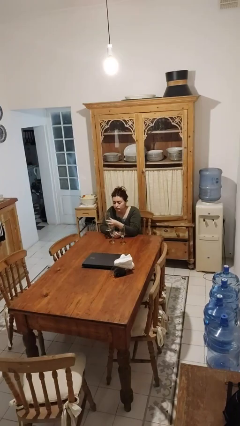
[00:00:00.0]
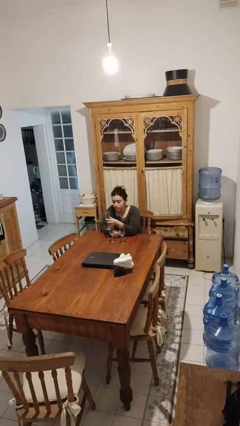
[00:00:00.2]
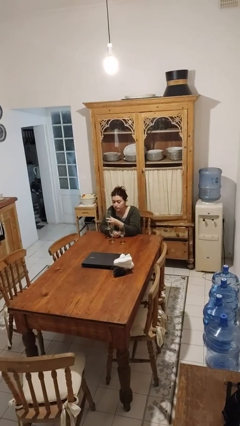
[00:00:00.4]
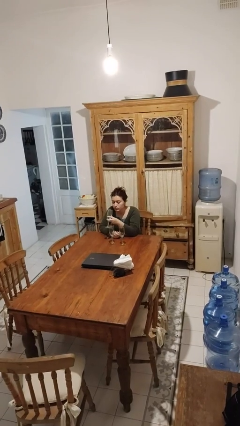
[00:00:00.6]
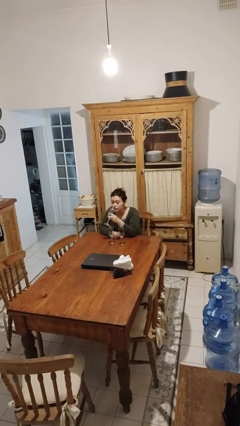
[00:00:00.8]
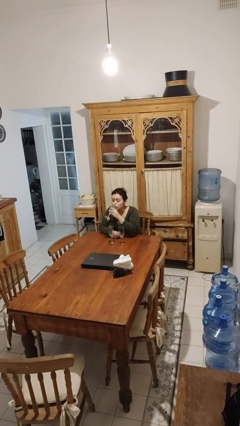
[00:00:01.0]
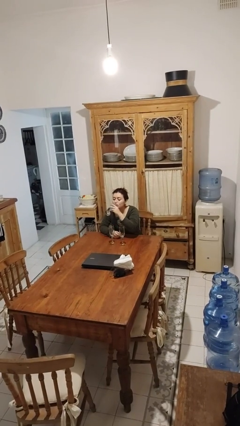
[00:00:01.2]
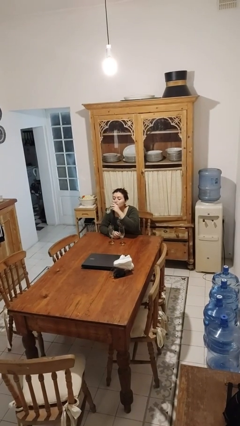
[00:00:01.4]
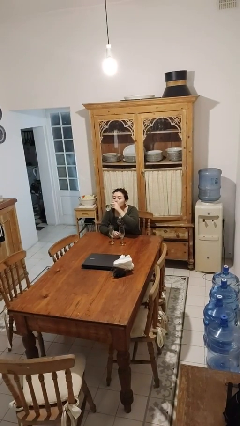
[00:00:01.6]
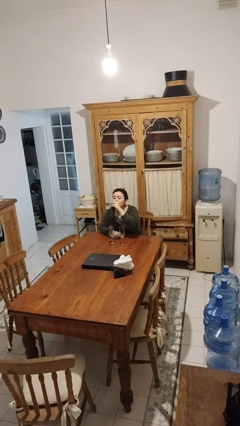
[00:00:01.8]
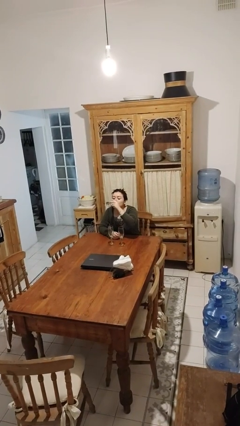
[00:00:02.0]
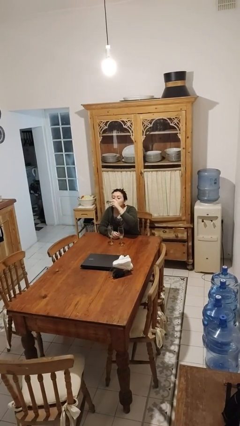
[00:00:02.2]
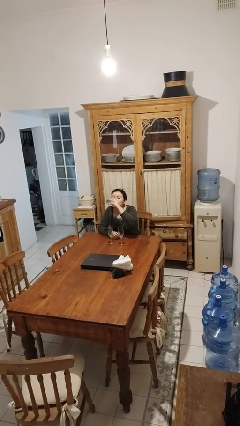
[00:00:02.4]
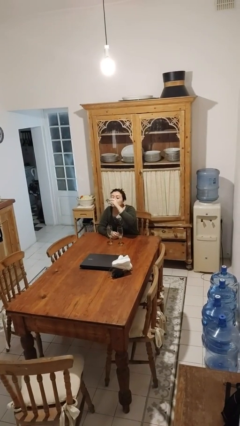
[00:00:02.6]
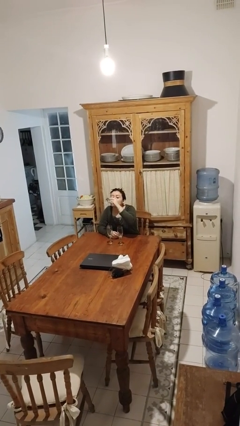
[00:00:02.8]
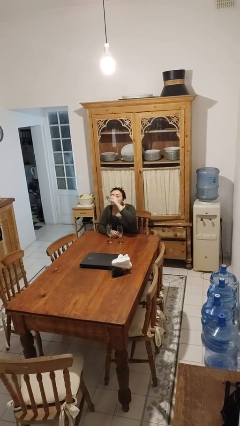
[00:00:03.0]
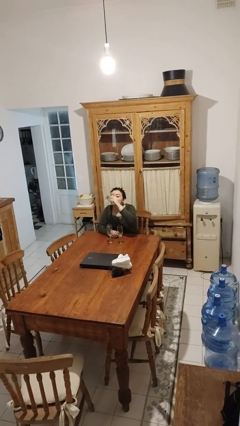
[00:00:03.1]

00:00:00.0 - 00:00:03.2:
person drinks from shotglass

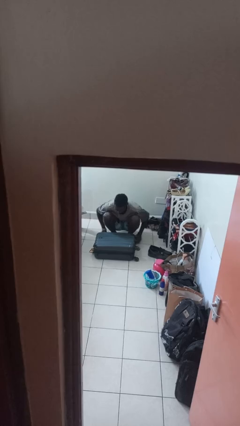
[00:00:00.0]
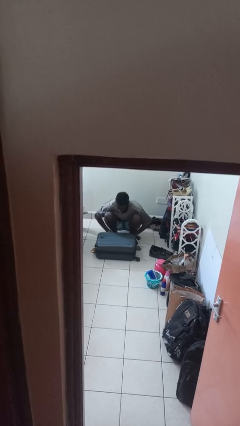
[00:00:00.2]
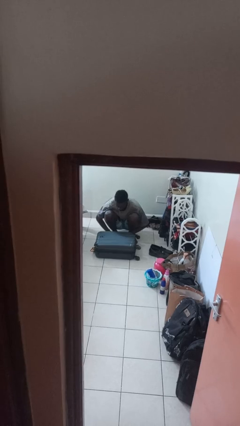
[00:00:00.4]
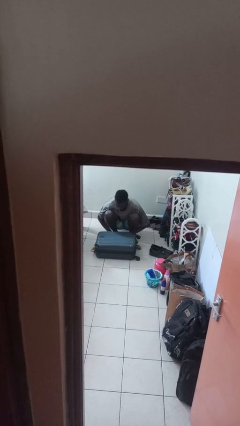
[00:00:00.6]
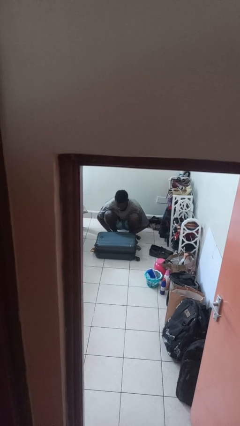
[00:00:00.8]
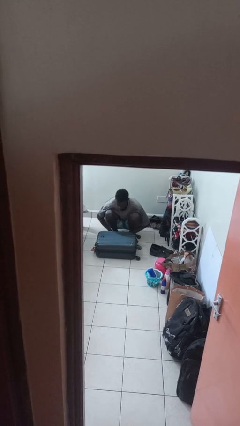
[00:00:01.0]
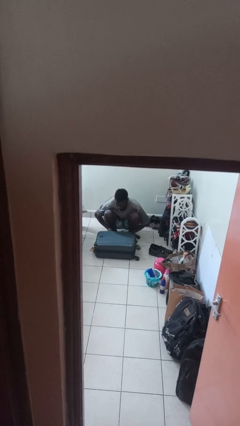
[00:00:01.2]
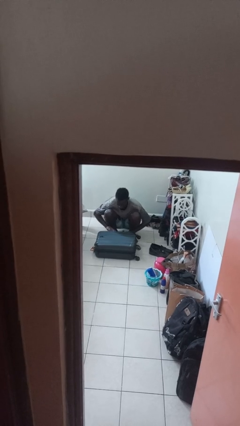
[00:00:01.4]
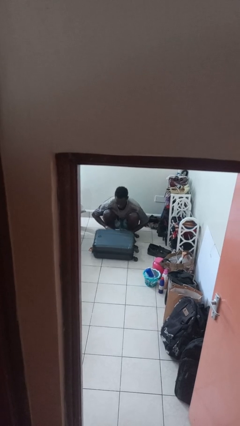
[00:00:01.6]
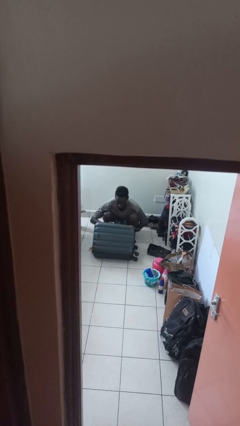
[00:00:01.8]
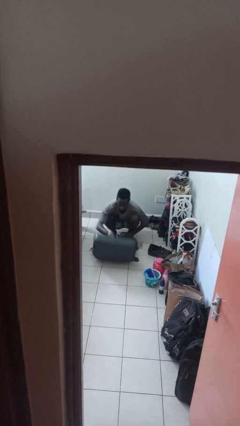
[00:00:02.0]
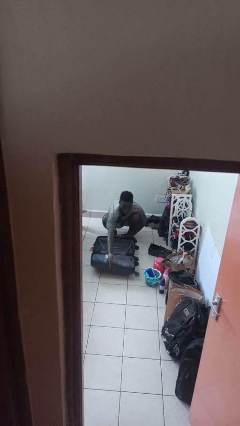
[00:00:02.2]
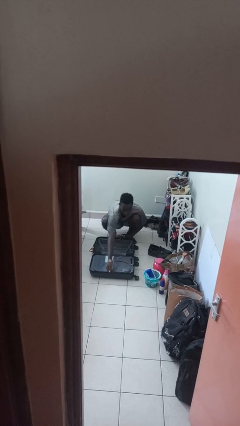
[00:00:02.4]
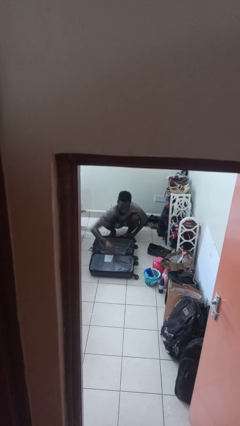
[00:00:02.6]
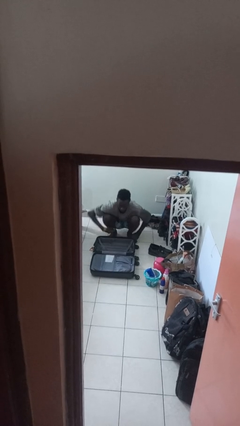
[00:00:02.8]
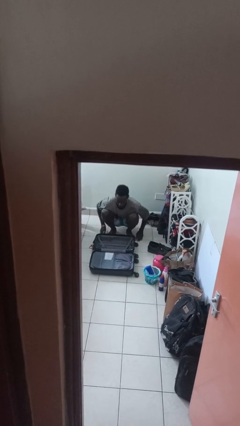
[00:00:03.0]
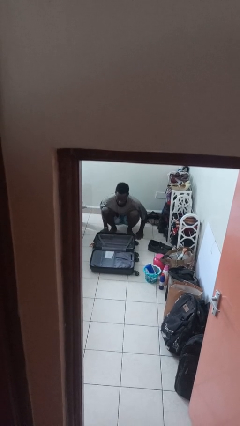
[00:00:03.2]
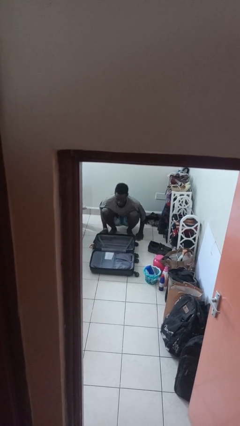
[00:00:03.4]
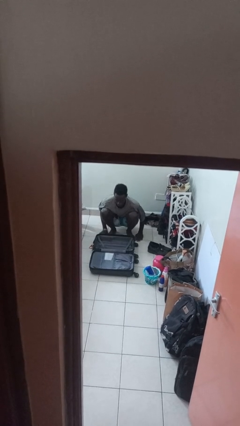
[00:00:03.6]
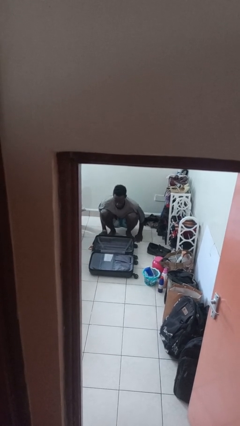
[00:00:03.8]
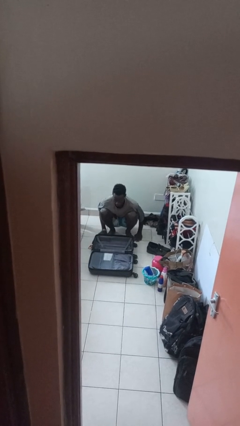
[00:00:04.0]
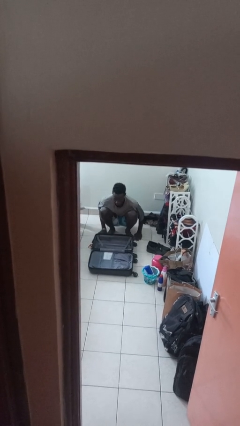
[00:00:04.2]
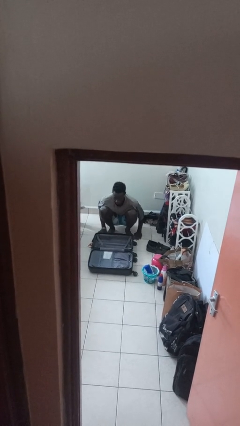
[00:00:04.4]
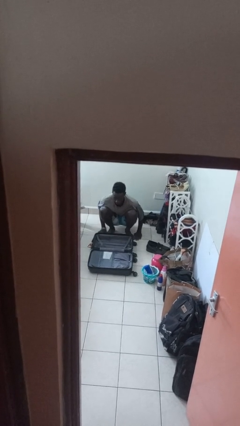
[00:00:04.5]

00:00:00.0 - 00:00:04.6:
person opens suitcase

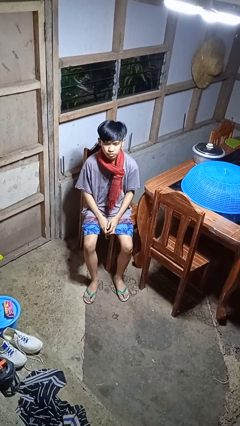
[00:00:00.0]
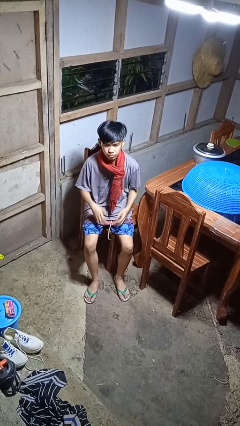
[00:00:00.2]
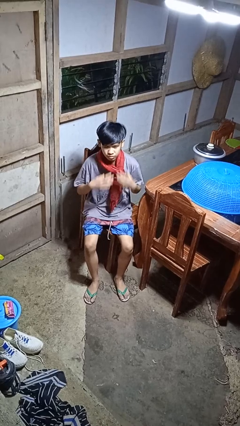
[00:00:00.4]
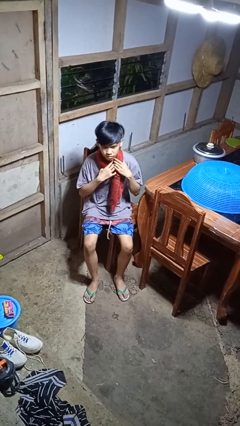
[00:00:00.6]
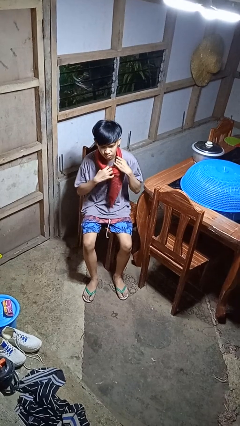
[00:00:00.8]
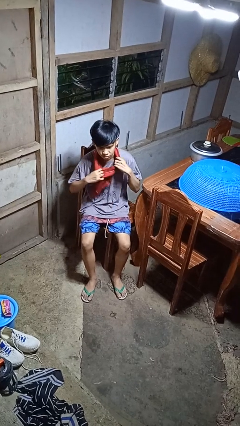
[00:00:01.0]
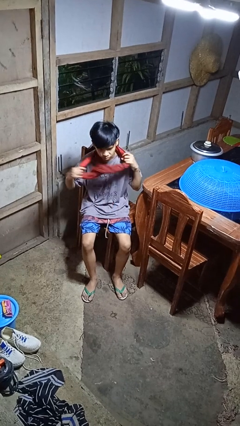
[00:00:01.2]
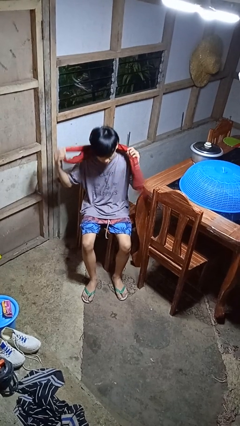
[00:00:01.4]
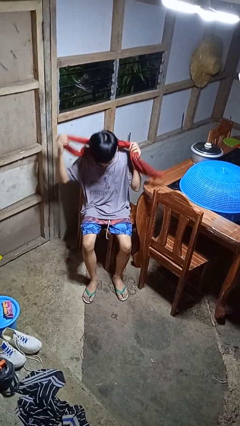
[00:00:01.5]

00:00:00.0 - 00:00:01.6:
person takes off scarf

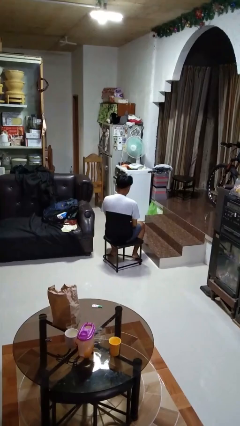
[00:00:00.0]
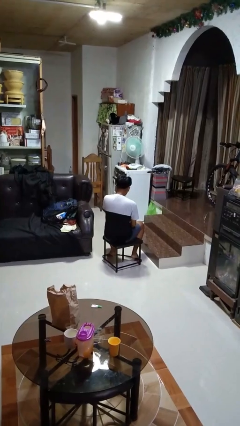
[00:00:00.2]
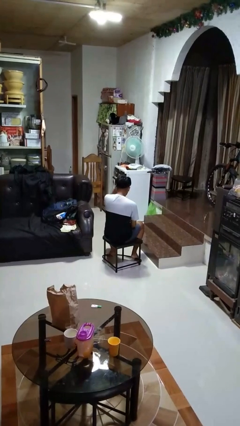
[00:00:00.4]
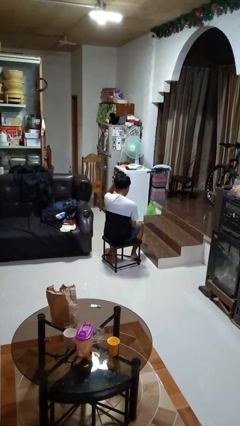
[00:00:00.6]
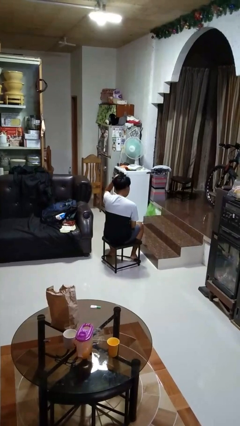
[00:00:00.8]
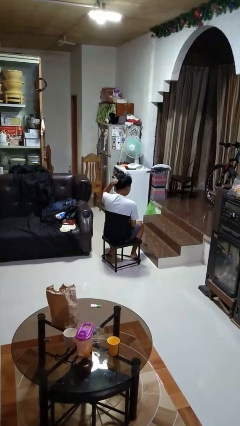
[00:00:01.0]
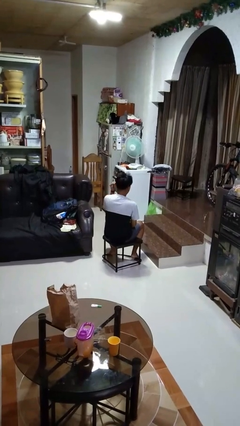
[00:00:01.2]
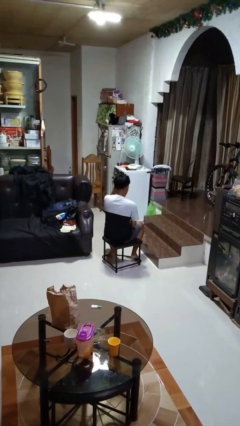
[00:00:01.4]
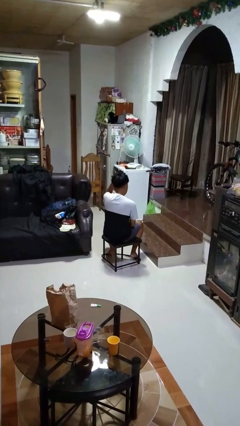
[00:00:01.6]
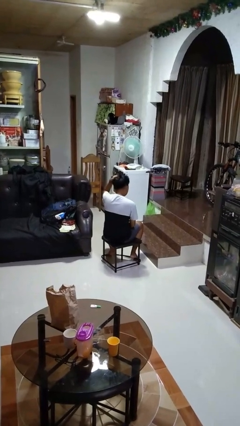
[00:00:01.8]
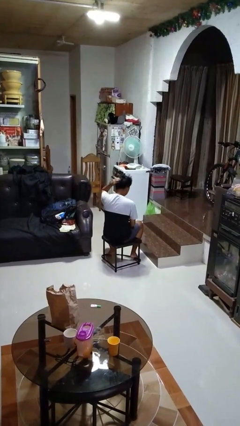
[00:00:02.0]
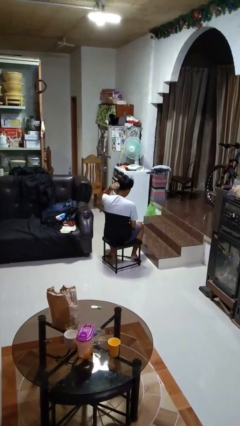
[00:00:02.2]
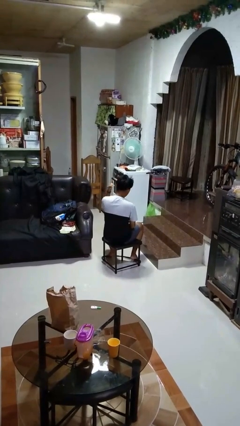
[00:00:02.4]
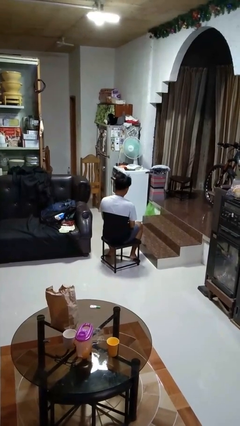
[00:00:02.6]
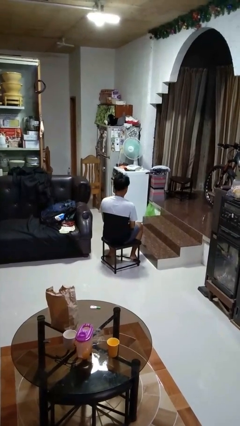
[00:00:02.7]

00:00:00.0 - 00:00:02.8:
person strokes hair

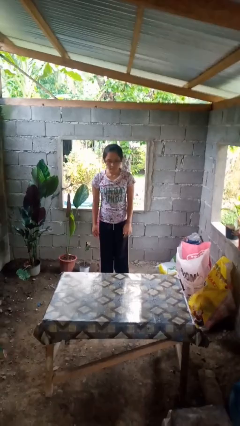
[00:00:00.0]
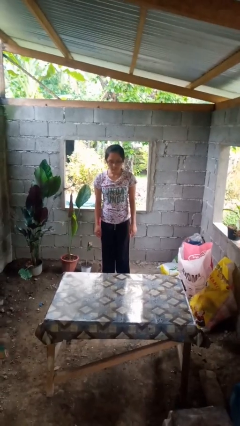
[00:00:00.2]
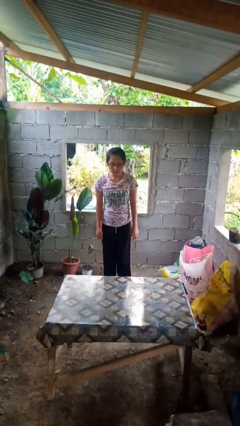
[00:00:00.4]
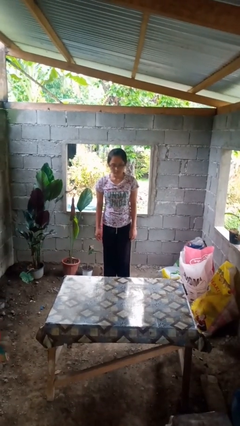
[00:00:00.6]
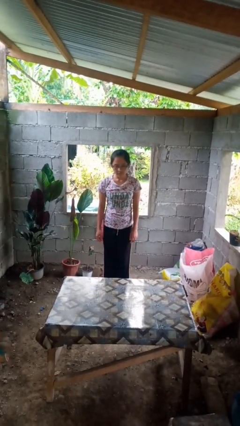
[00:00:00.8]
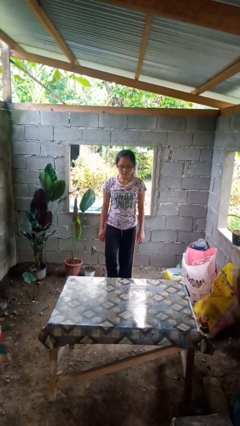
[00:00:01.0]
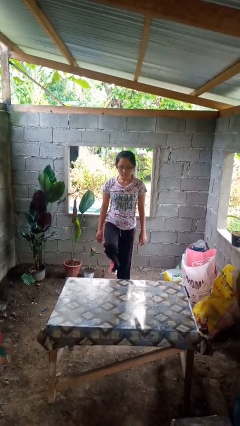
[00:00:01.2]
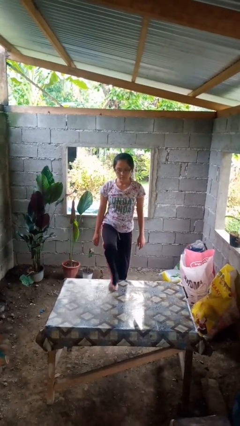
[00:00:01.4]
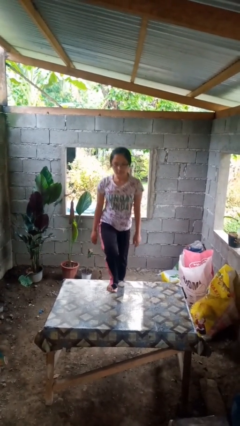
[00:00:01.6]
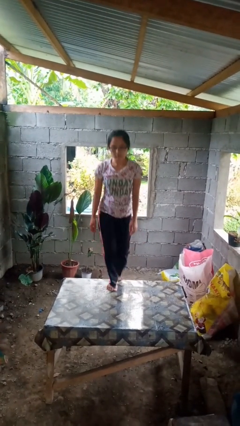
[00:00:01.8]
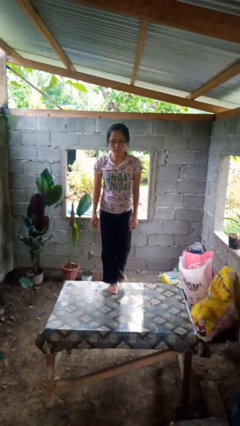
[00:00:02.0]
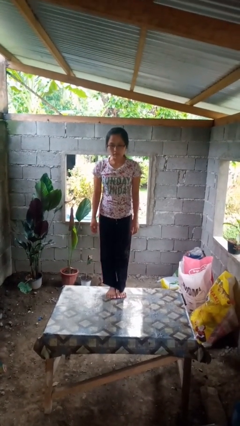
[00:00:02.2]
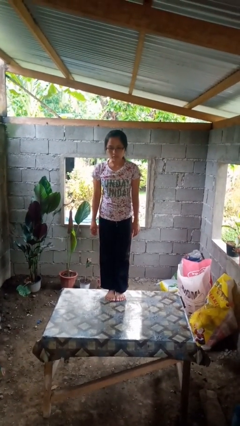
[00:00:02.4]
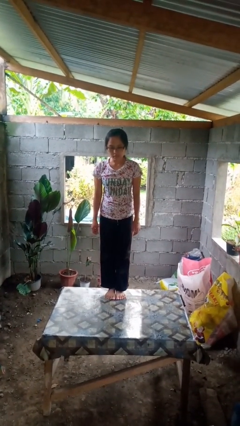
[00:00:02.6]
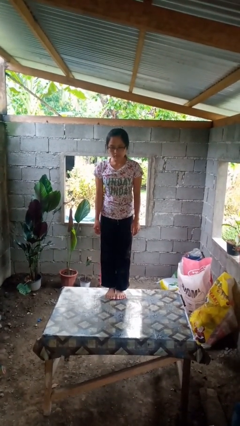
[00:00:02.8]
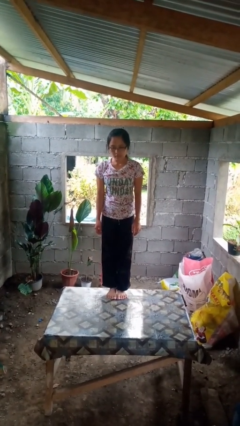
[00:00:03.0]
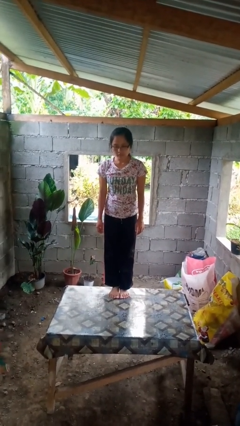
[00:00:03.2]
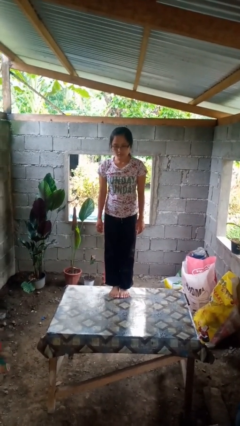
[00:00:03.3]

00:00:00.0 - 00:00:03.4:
person climbs on table

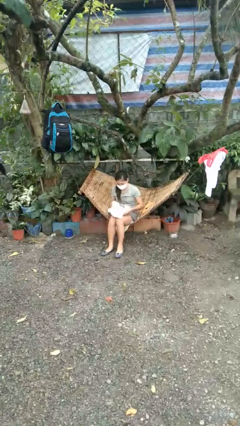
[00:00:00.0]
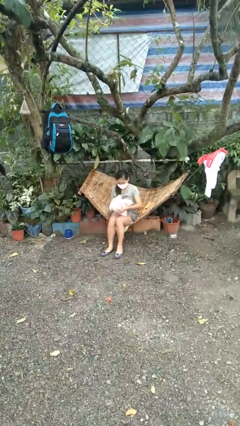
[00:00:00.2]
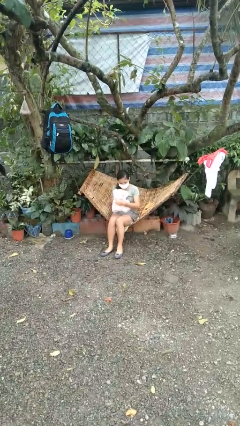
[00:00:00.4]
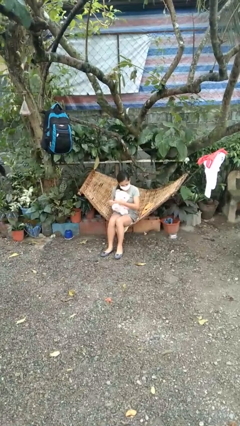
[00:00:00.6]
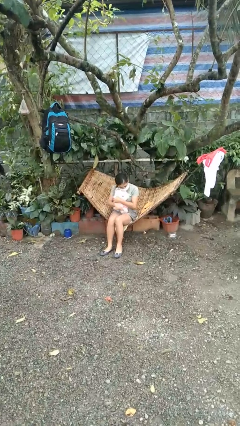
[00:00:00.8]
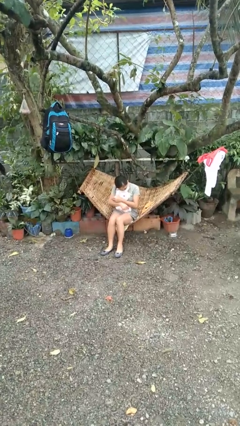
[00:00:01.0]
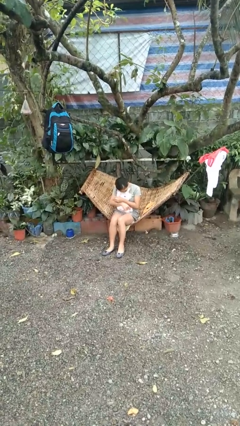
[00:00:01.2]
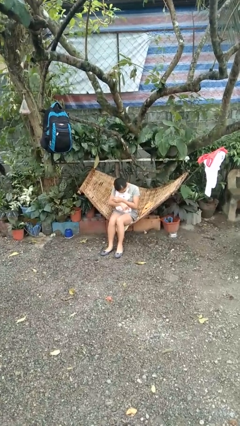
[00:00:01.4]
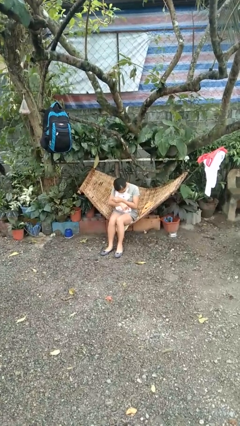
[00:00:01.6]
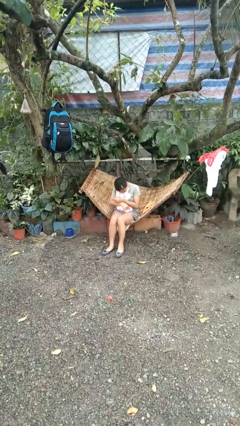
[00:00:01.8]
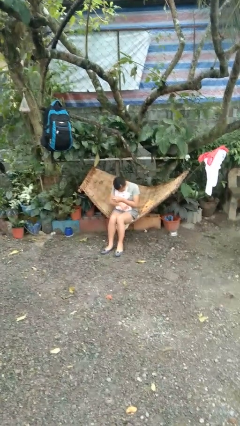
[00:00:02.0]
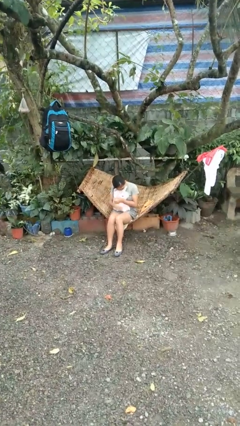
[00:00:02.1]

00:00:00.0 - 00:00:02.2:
person hugs stuffed animal
